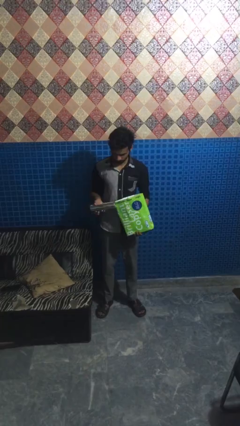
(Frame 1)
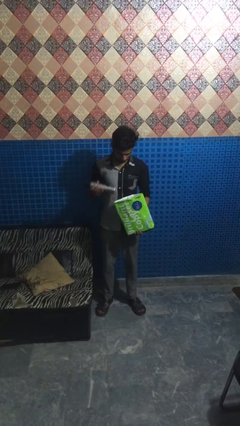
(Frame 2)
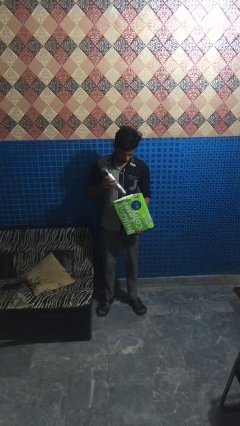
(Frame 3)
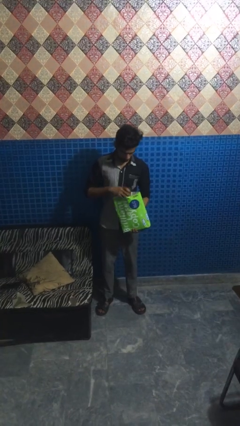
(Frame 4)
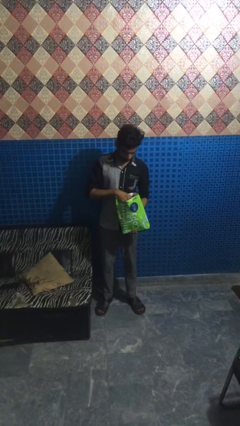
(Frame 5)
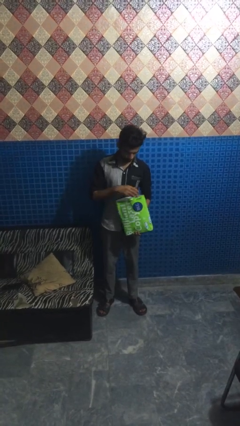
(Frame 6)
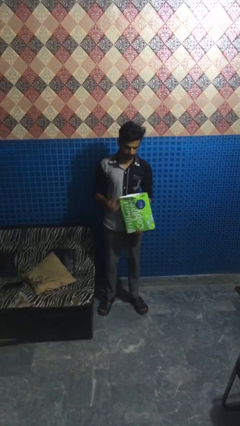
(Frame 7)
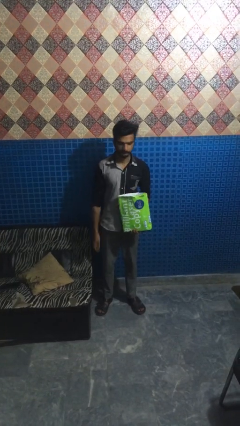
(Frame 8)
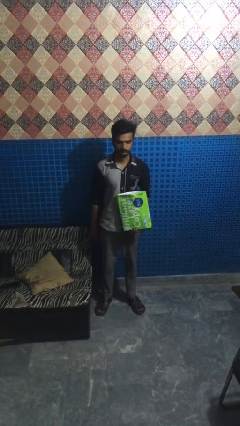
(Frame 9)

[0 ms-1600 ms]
person puts object into bag

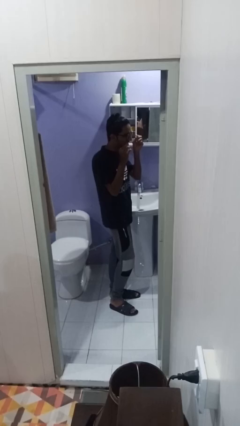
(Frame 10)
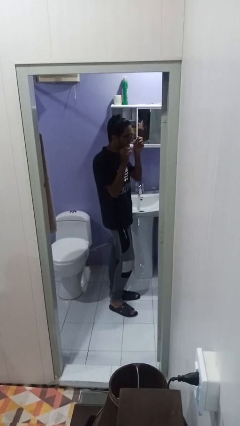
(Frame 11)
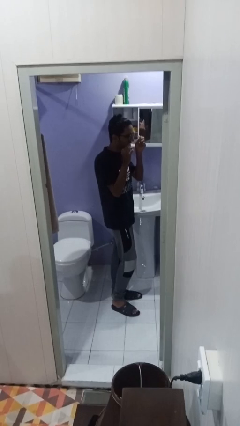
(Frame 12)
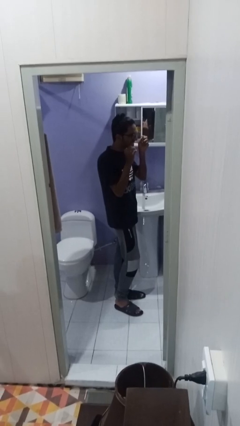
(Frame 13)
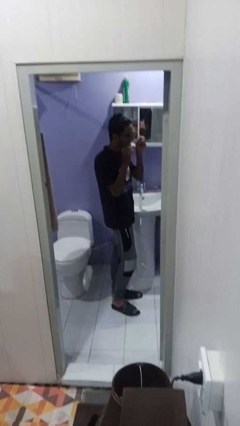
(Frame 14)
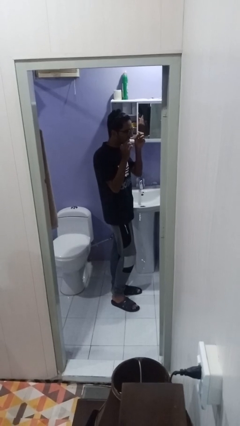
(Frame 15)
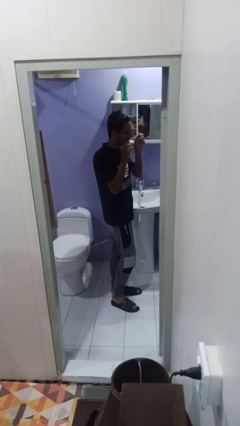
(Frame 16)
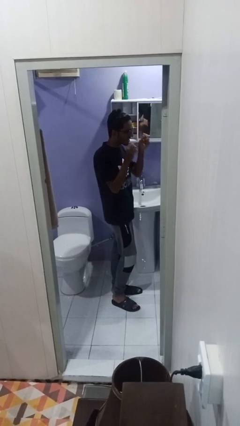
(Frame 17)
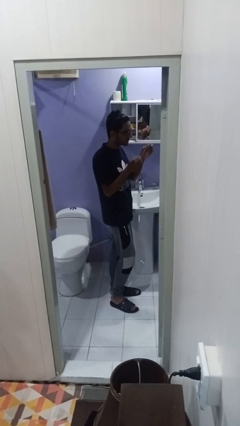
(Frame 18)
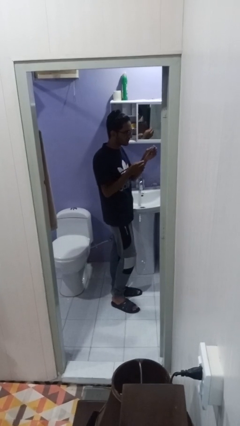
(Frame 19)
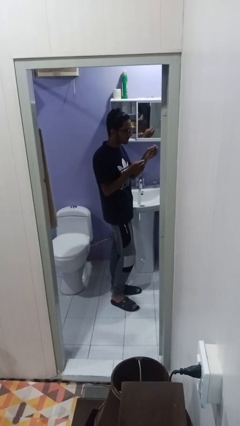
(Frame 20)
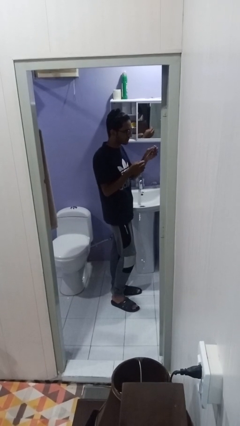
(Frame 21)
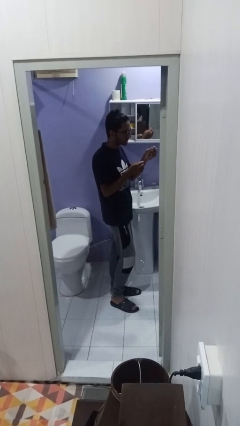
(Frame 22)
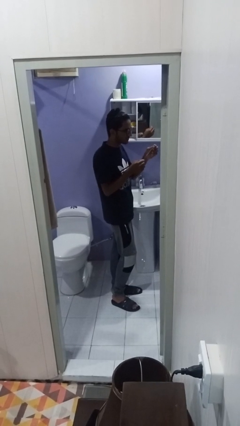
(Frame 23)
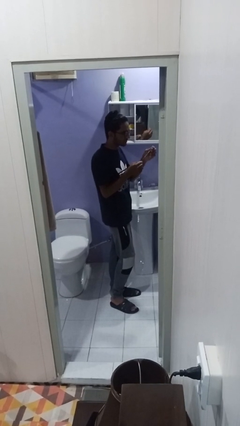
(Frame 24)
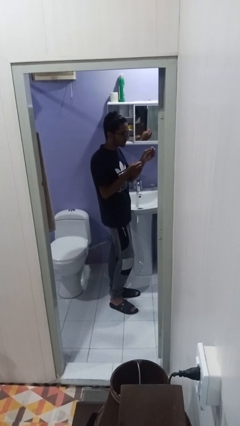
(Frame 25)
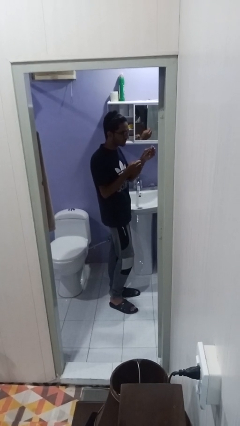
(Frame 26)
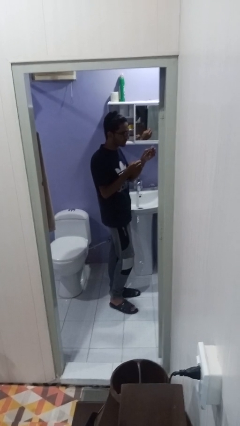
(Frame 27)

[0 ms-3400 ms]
person flosses

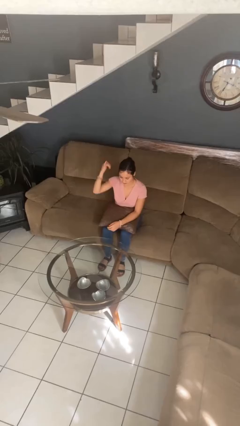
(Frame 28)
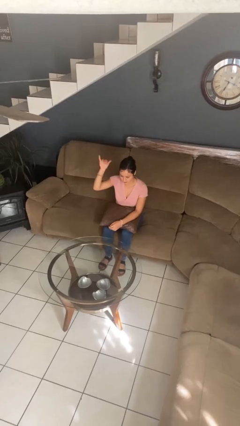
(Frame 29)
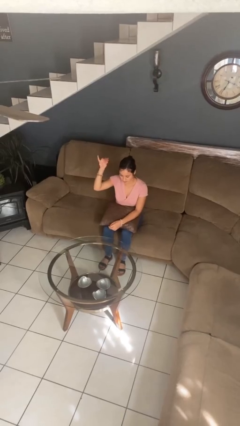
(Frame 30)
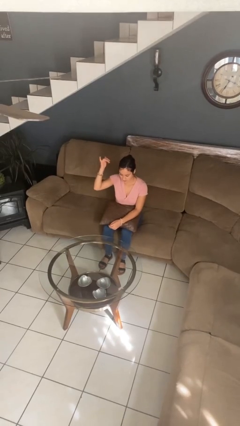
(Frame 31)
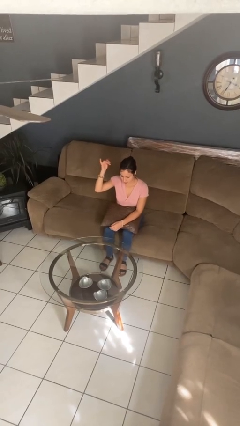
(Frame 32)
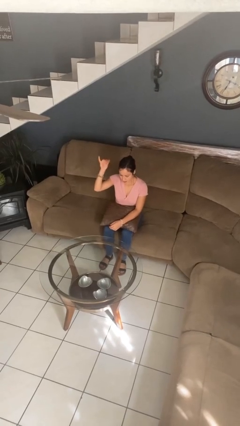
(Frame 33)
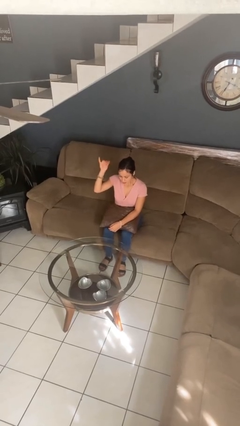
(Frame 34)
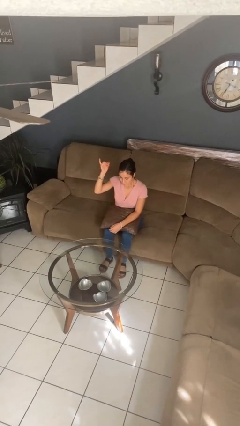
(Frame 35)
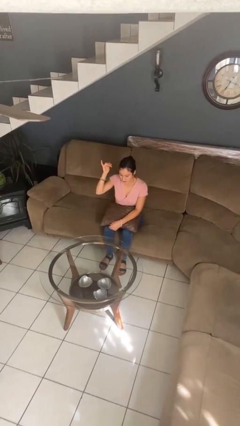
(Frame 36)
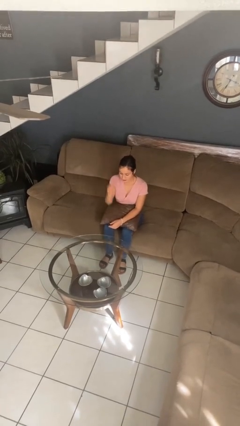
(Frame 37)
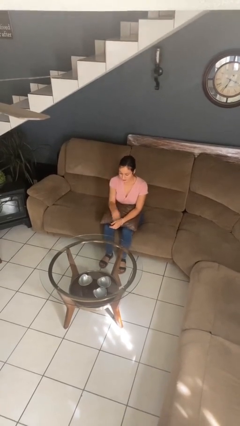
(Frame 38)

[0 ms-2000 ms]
person gestures hang loose

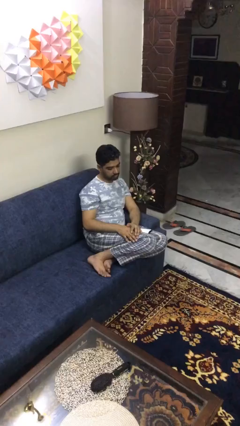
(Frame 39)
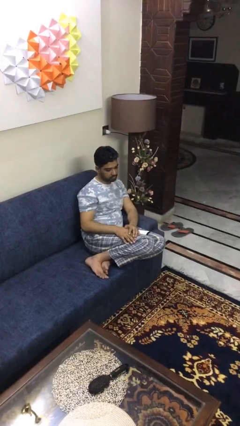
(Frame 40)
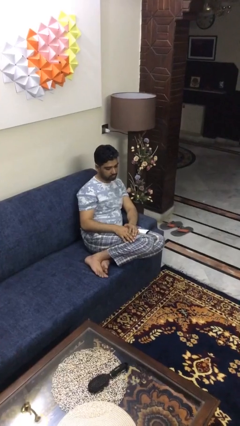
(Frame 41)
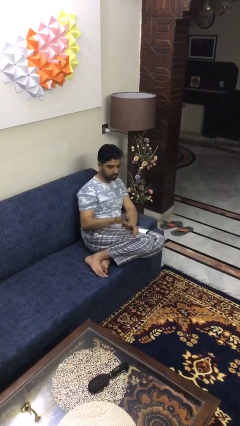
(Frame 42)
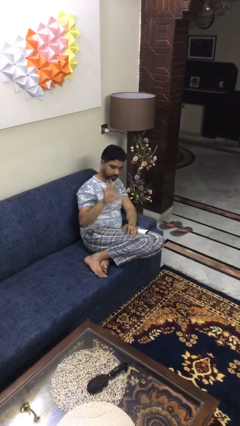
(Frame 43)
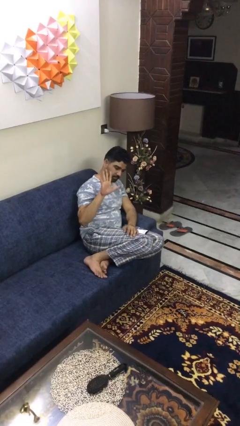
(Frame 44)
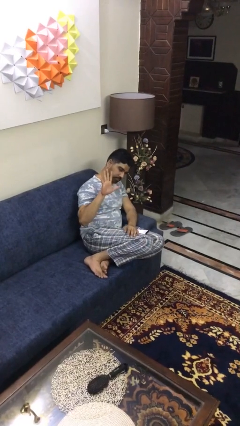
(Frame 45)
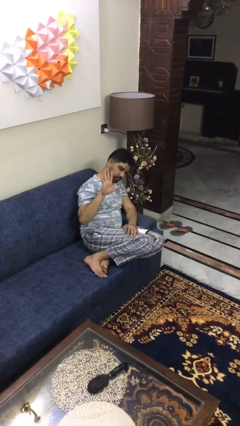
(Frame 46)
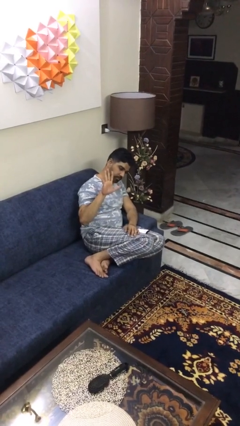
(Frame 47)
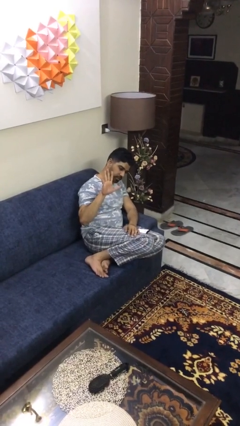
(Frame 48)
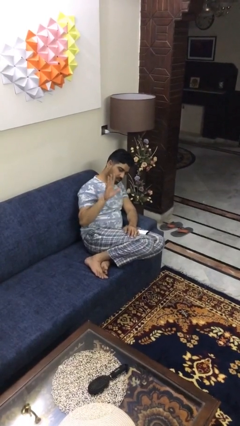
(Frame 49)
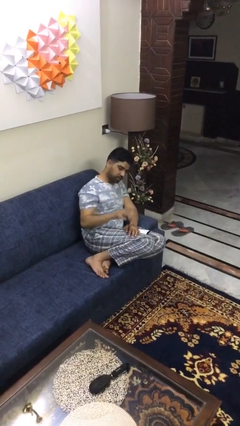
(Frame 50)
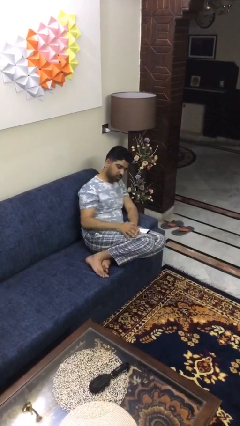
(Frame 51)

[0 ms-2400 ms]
person gestures number five

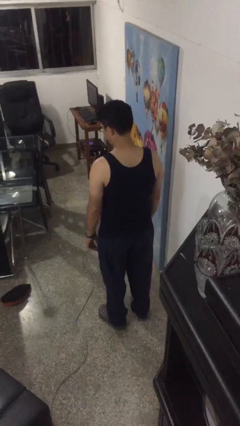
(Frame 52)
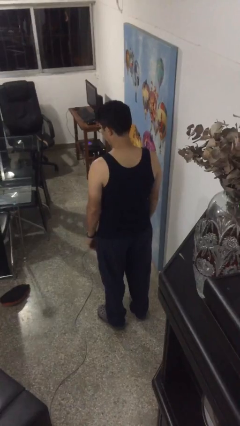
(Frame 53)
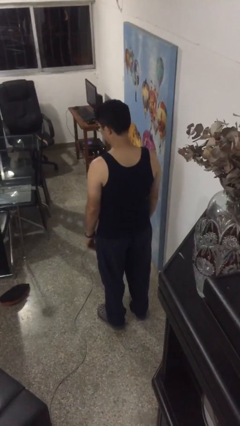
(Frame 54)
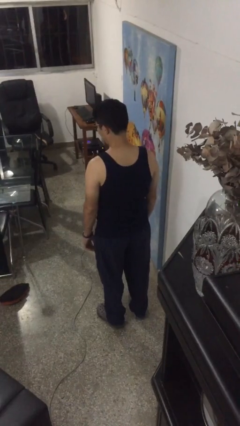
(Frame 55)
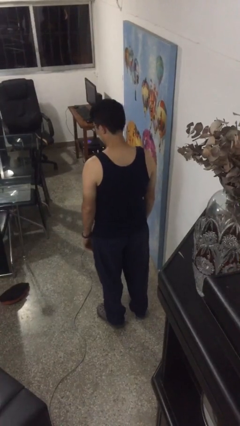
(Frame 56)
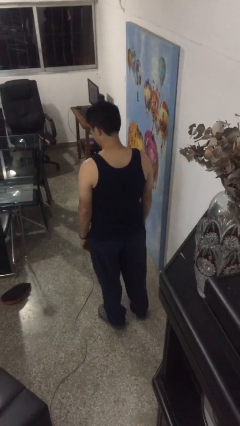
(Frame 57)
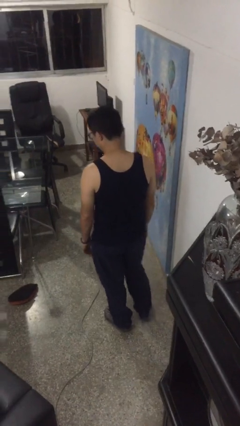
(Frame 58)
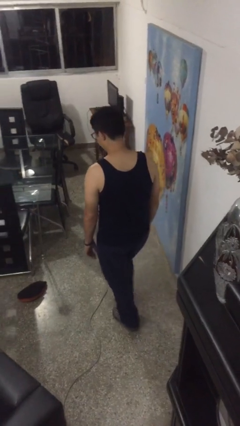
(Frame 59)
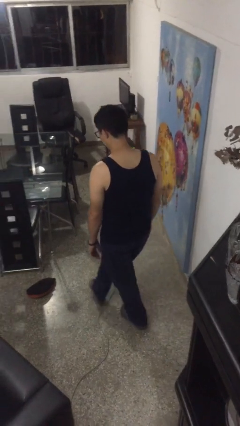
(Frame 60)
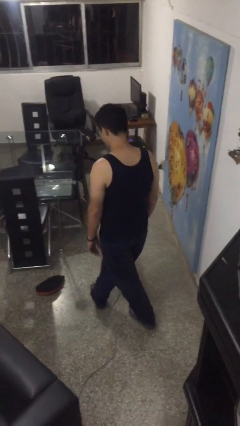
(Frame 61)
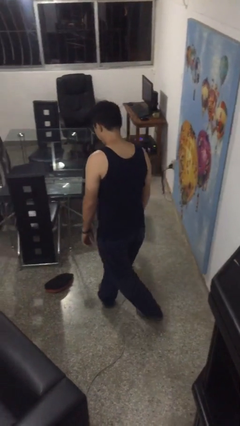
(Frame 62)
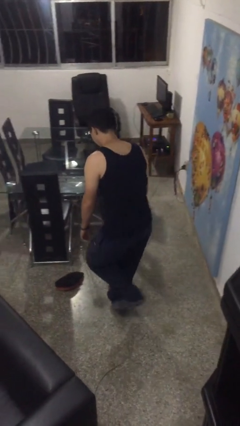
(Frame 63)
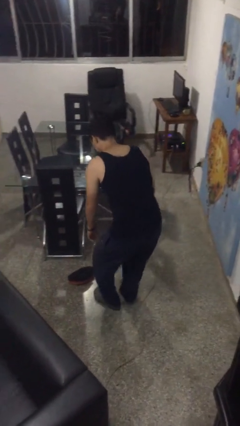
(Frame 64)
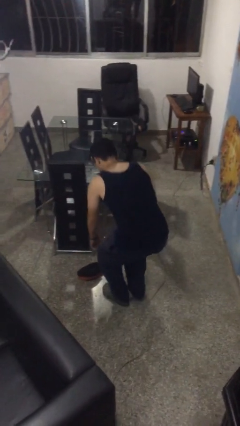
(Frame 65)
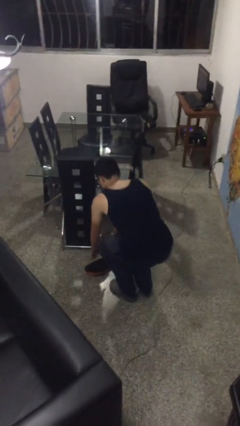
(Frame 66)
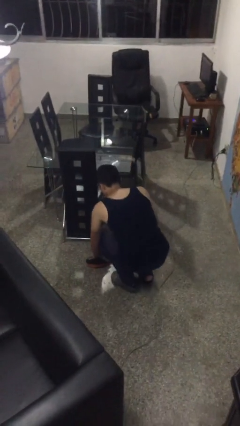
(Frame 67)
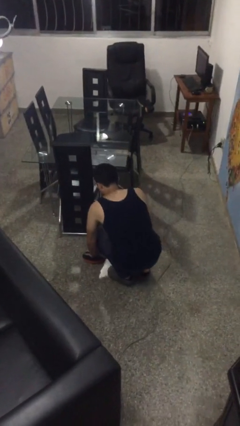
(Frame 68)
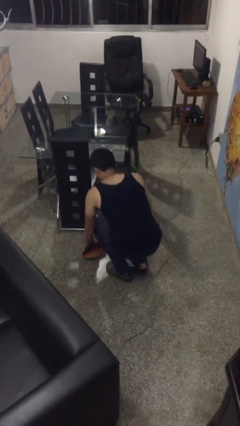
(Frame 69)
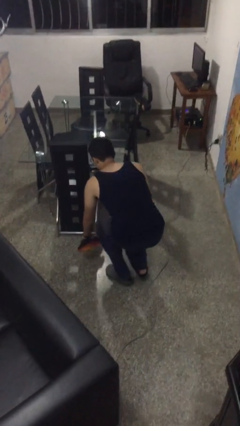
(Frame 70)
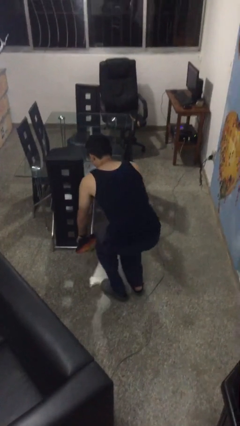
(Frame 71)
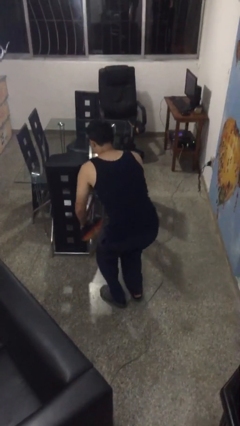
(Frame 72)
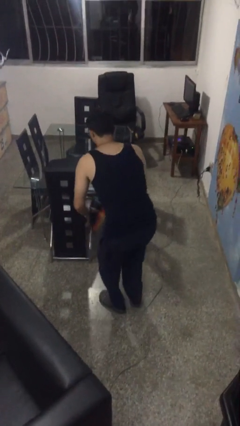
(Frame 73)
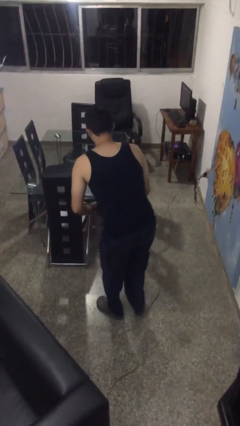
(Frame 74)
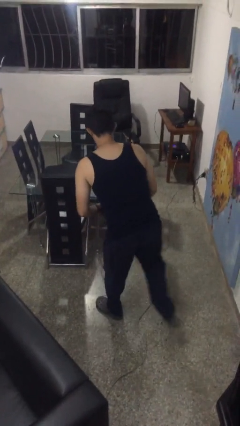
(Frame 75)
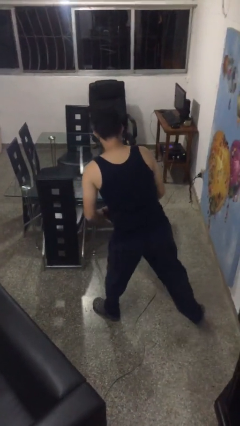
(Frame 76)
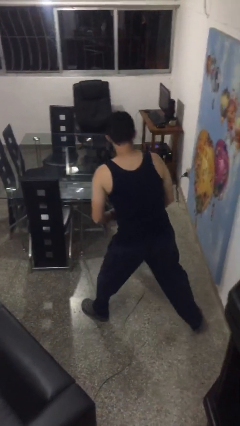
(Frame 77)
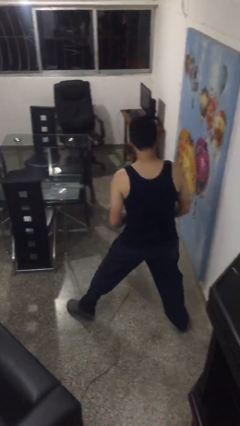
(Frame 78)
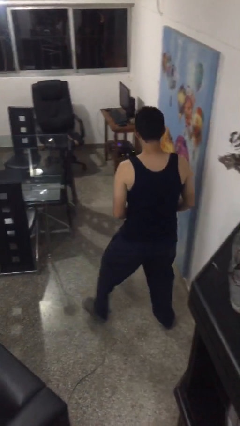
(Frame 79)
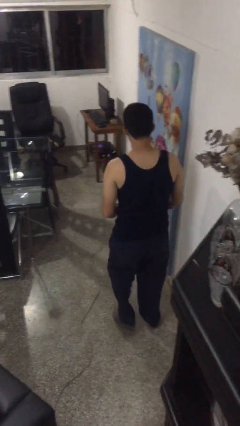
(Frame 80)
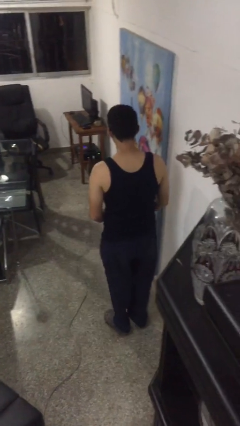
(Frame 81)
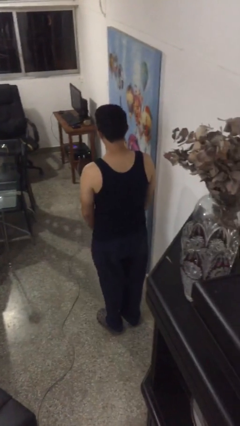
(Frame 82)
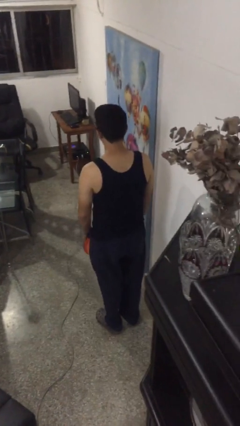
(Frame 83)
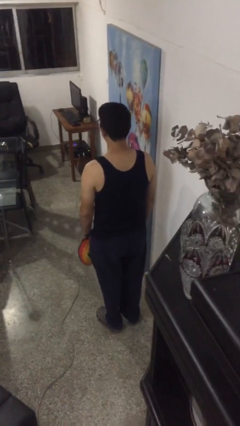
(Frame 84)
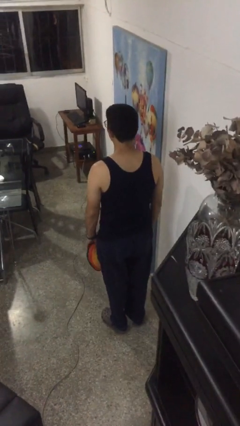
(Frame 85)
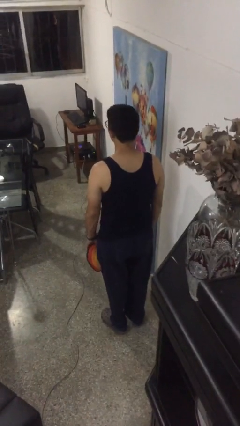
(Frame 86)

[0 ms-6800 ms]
person picks up object from floor

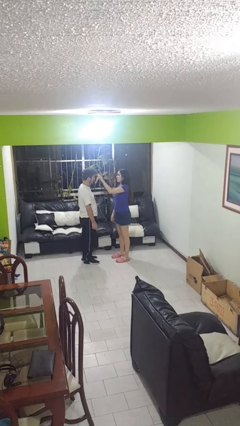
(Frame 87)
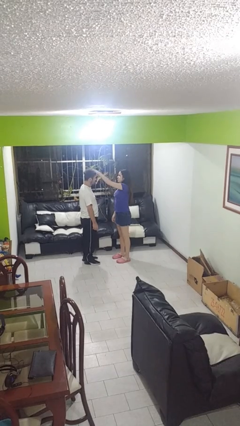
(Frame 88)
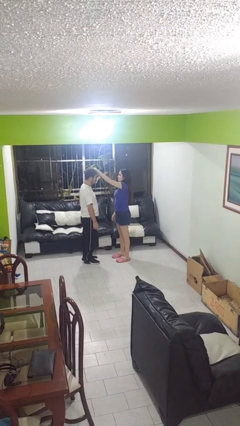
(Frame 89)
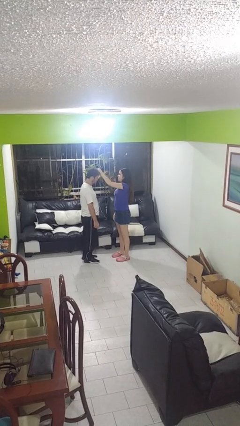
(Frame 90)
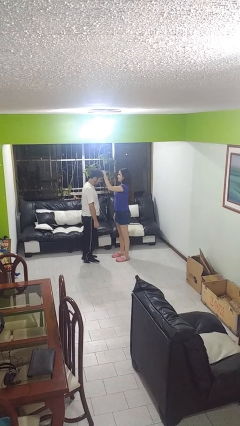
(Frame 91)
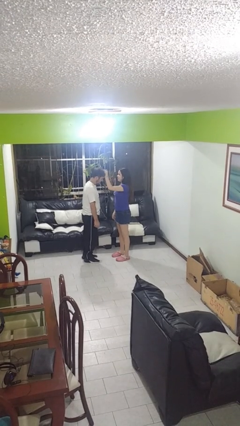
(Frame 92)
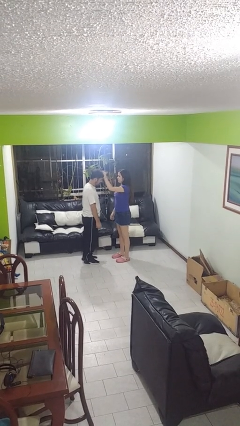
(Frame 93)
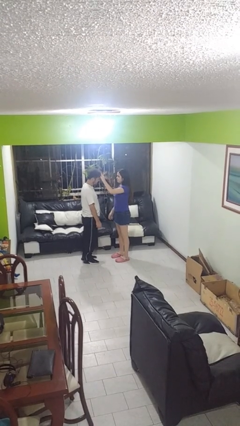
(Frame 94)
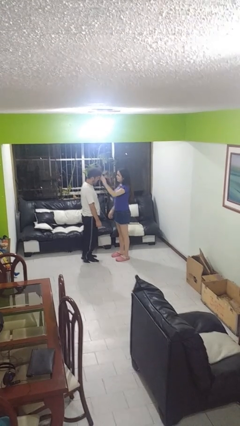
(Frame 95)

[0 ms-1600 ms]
person grabs person by hair

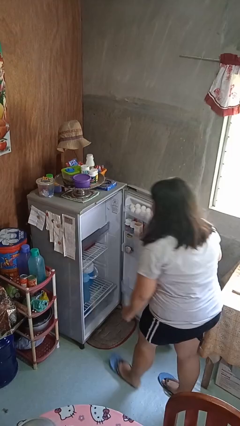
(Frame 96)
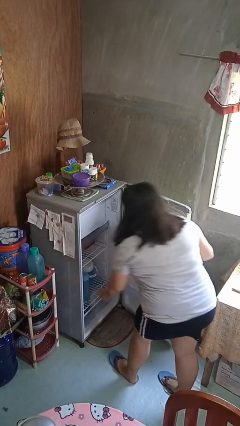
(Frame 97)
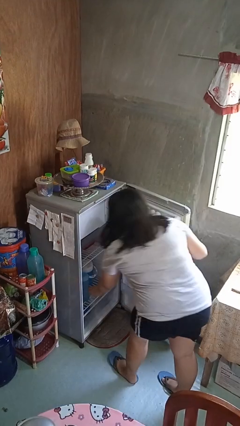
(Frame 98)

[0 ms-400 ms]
person takes object from refrigerator
